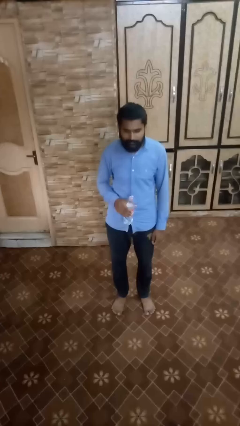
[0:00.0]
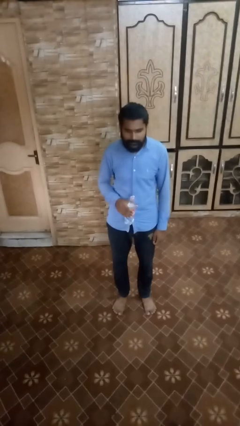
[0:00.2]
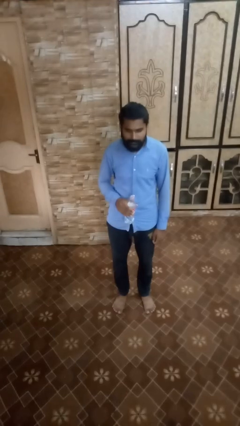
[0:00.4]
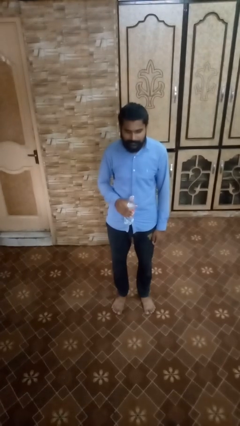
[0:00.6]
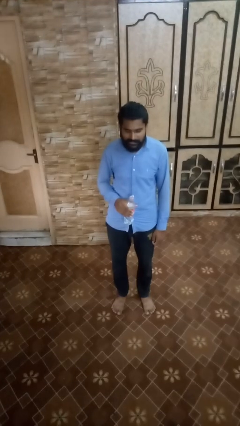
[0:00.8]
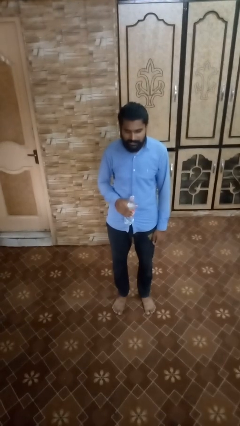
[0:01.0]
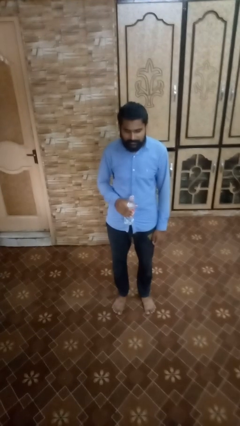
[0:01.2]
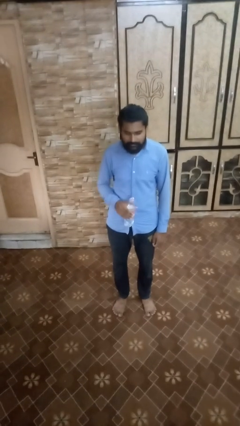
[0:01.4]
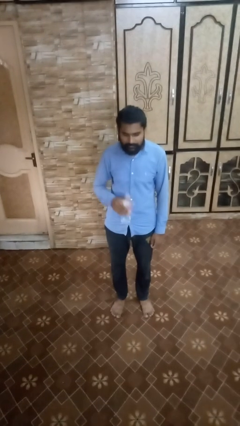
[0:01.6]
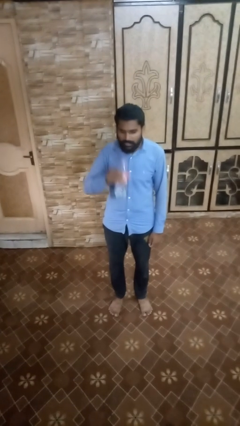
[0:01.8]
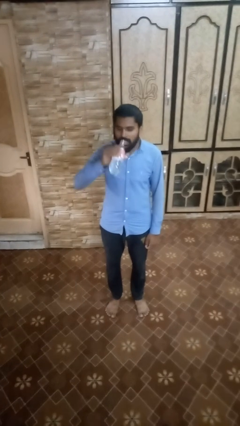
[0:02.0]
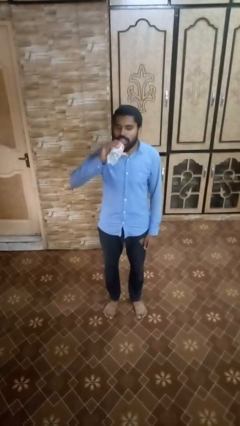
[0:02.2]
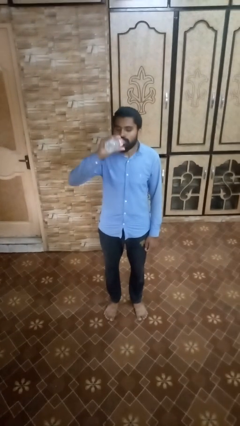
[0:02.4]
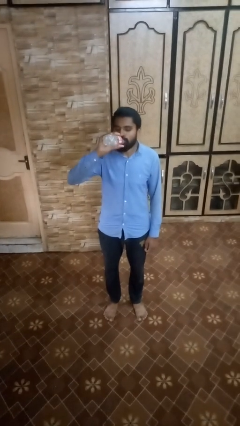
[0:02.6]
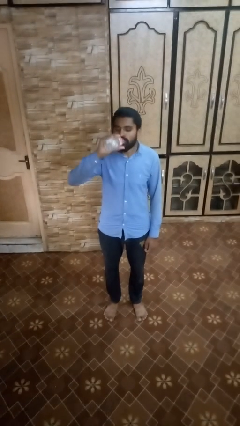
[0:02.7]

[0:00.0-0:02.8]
person drinks from bottle

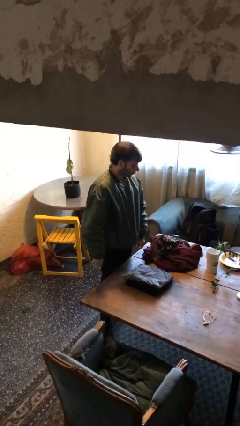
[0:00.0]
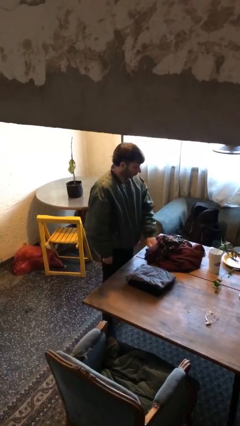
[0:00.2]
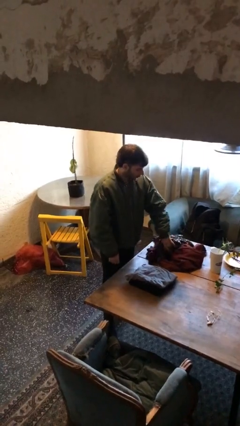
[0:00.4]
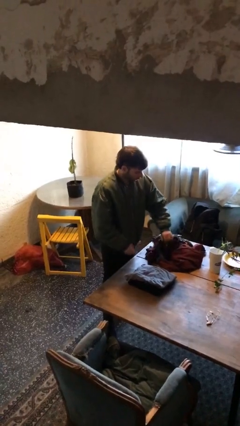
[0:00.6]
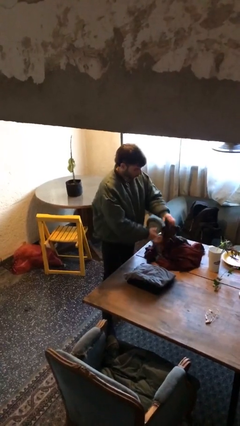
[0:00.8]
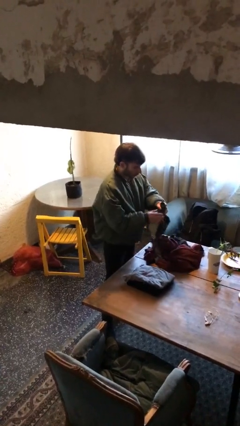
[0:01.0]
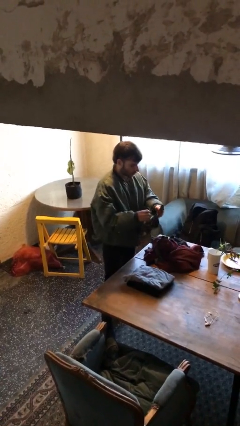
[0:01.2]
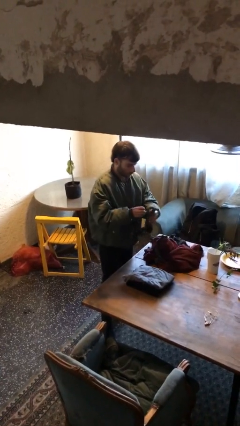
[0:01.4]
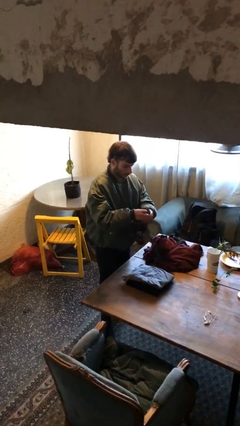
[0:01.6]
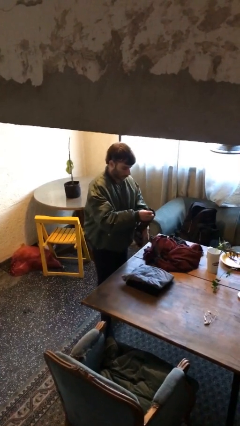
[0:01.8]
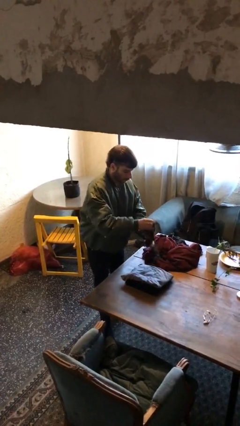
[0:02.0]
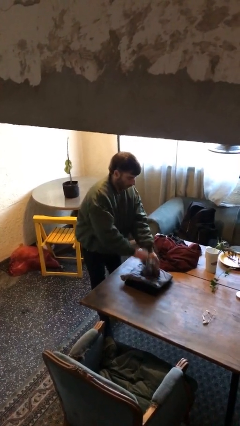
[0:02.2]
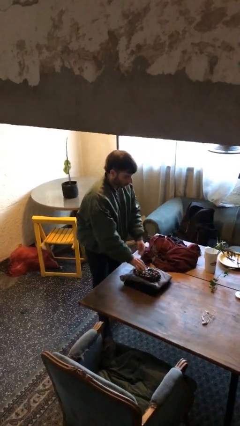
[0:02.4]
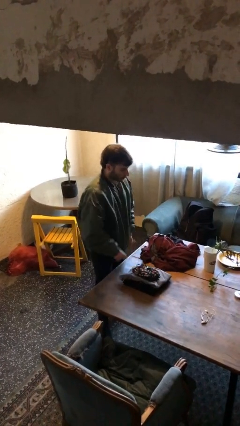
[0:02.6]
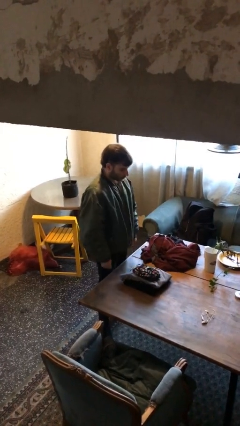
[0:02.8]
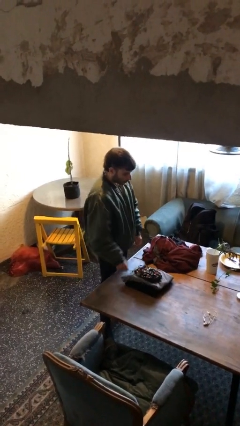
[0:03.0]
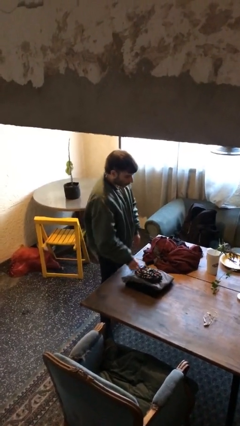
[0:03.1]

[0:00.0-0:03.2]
person folds socks

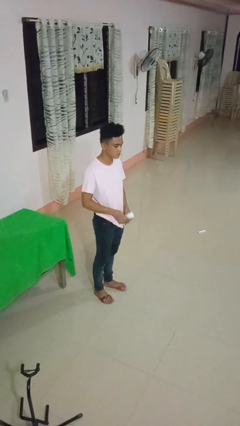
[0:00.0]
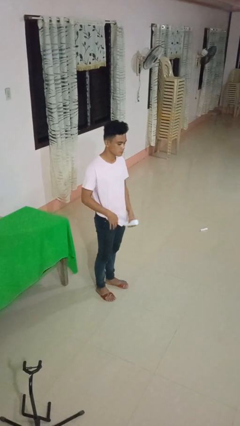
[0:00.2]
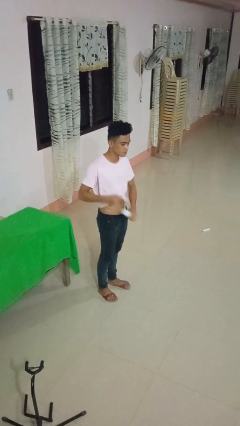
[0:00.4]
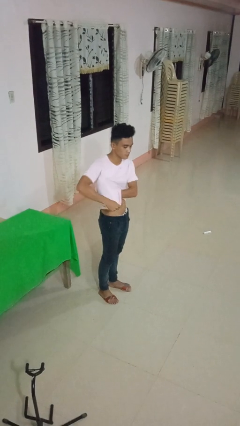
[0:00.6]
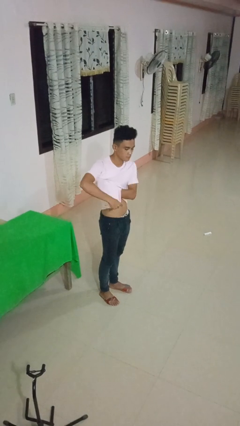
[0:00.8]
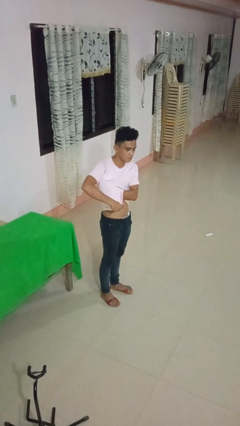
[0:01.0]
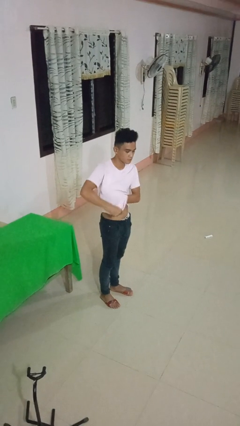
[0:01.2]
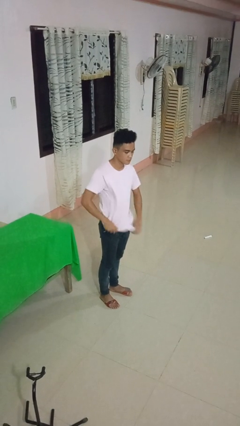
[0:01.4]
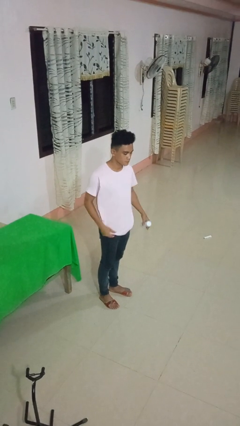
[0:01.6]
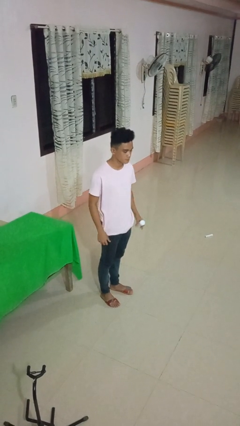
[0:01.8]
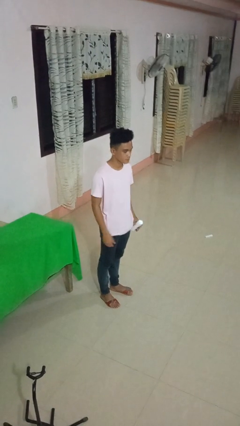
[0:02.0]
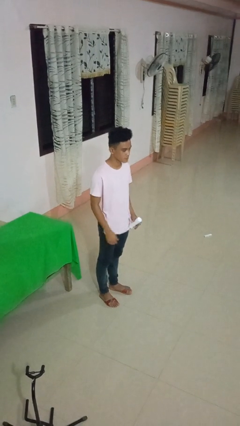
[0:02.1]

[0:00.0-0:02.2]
person applies deodorant

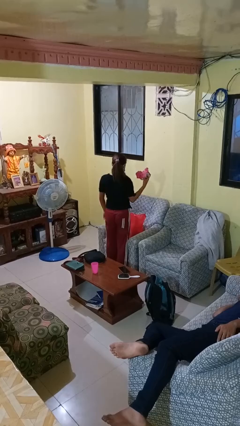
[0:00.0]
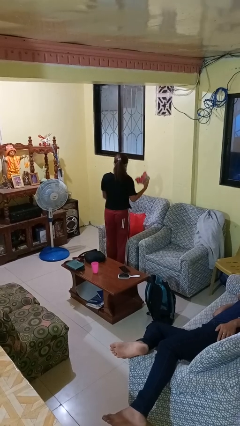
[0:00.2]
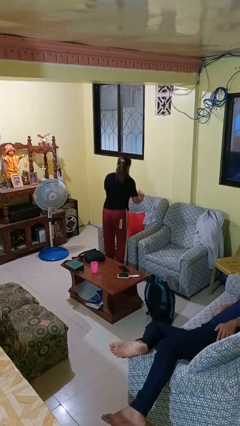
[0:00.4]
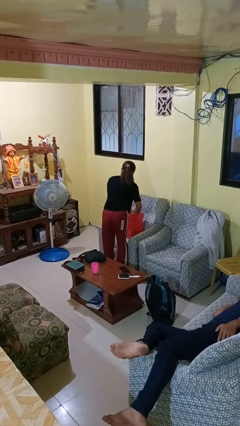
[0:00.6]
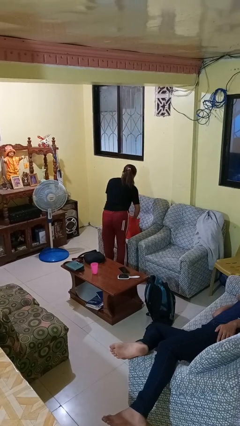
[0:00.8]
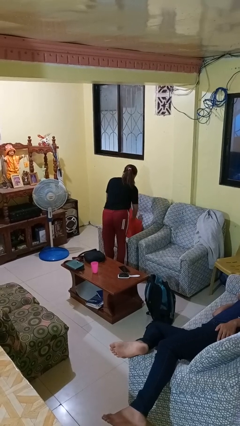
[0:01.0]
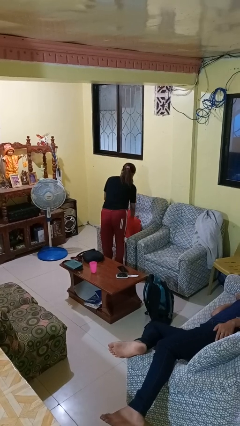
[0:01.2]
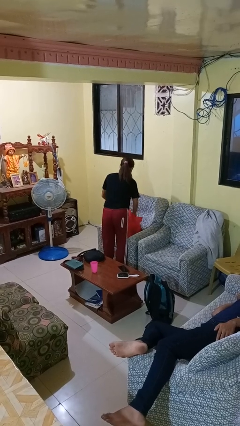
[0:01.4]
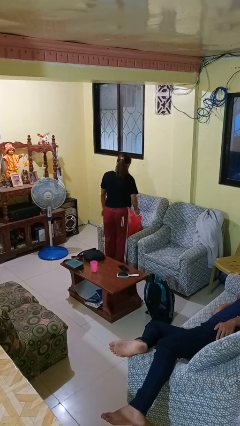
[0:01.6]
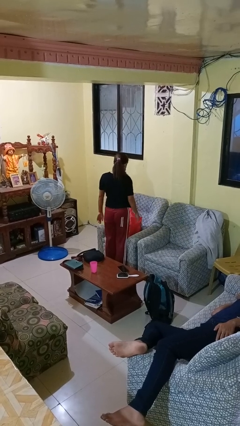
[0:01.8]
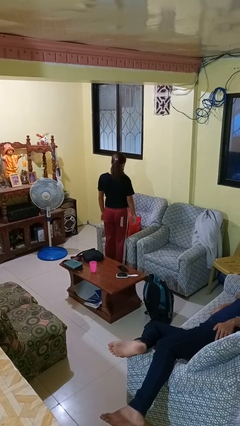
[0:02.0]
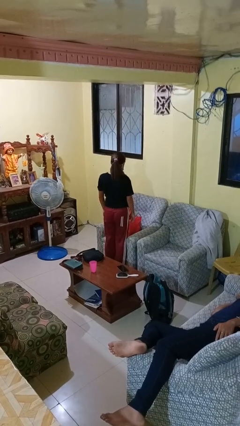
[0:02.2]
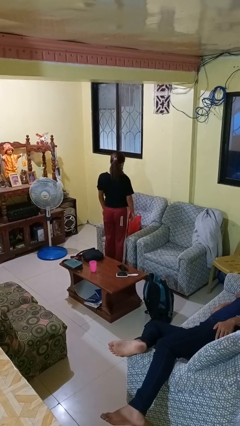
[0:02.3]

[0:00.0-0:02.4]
person puts object into bag

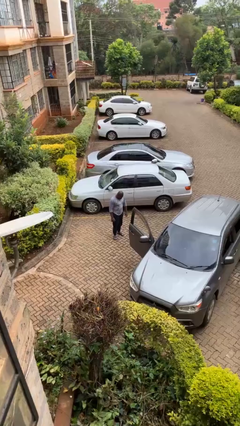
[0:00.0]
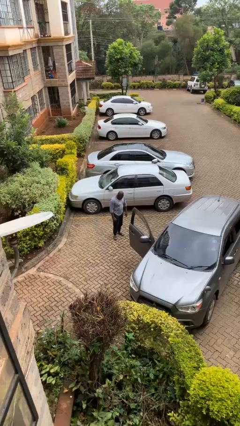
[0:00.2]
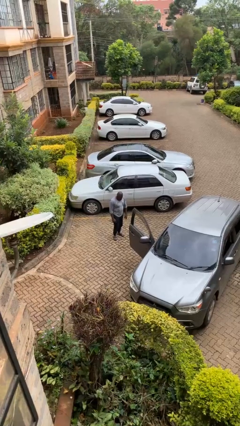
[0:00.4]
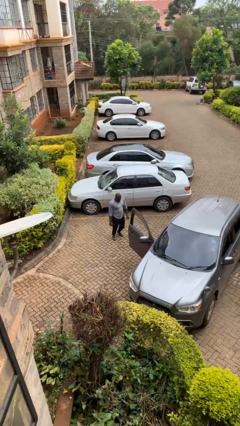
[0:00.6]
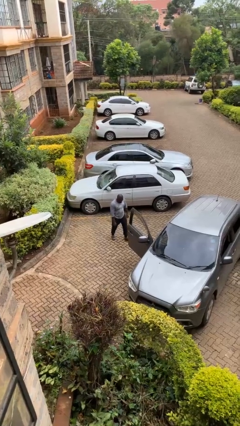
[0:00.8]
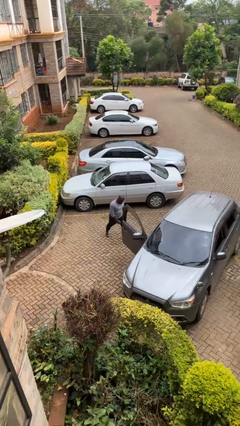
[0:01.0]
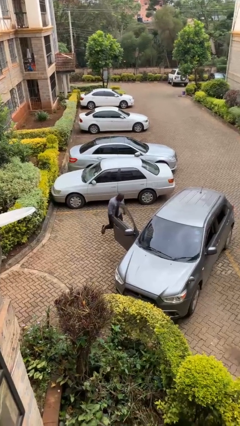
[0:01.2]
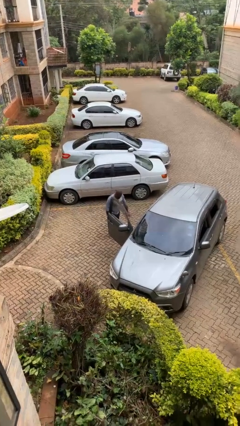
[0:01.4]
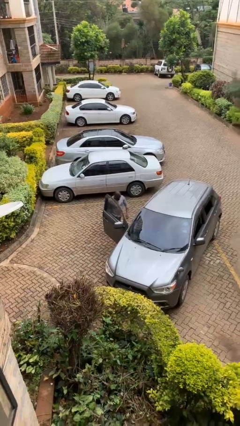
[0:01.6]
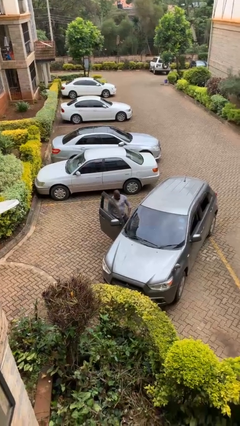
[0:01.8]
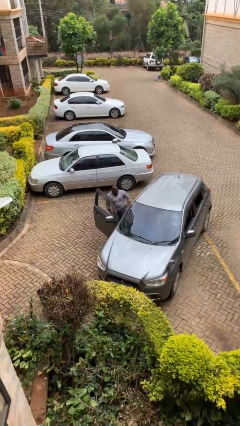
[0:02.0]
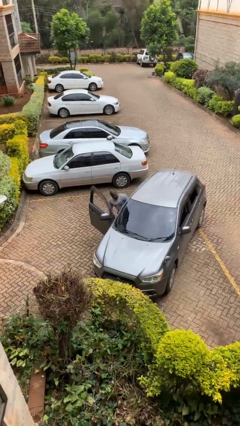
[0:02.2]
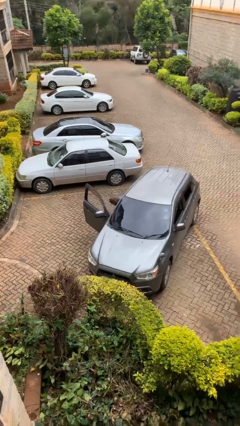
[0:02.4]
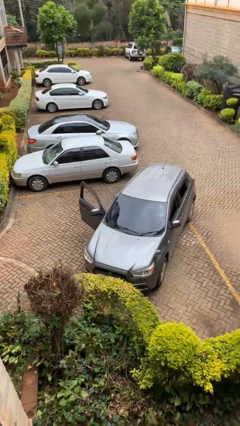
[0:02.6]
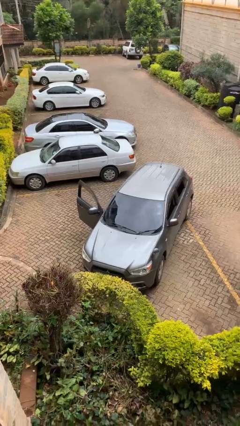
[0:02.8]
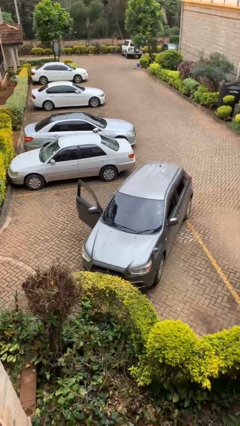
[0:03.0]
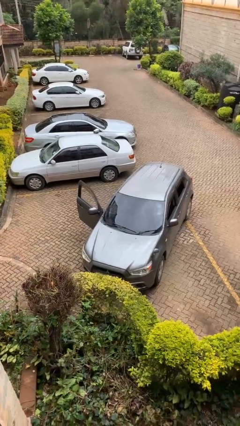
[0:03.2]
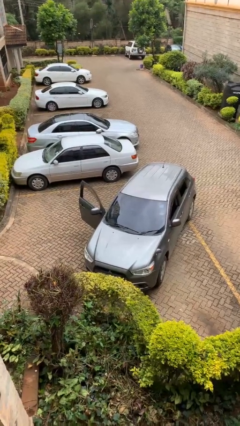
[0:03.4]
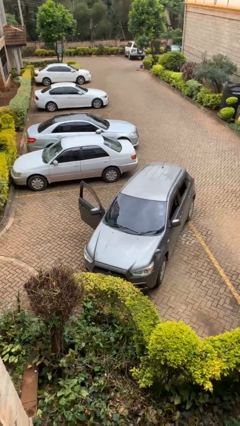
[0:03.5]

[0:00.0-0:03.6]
person enters car

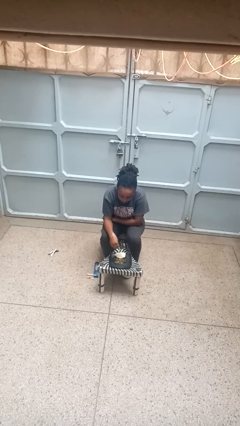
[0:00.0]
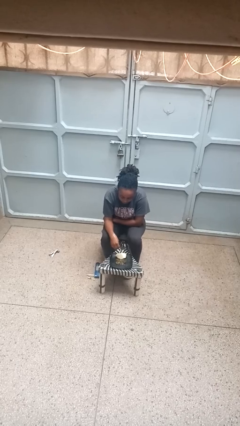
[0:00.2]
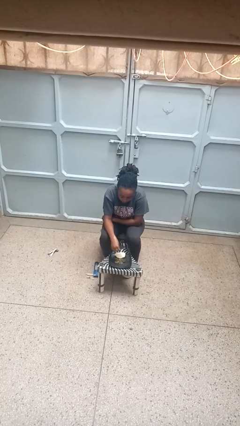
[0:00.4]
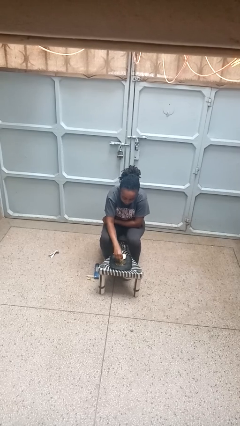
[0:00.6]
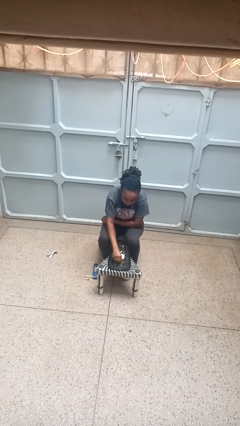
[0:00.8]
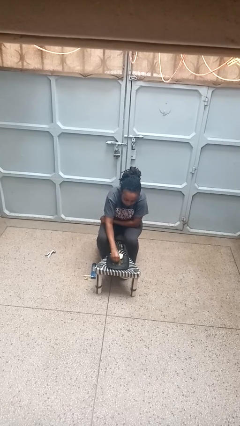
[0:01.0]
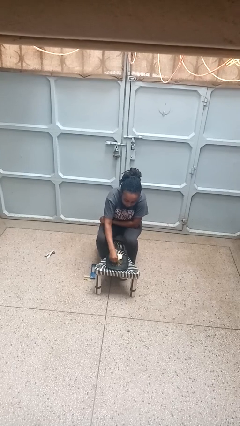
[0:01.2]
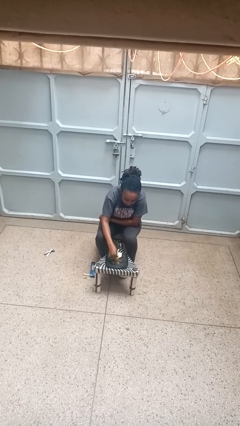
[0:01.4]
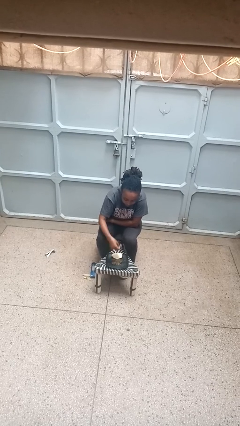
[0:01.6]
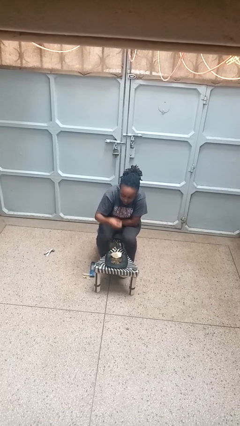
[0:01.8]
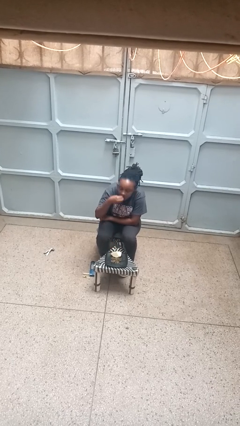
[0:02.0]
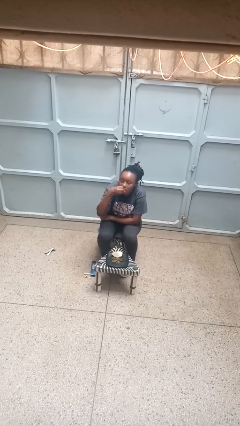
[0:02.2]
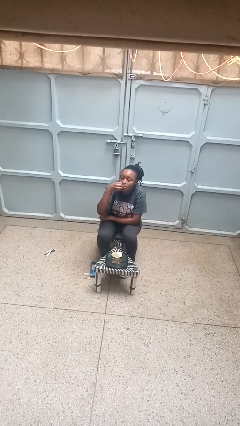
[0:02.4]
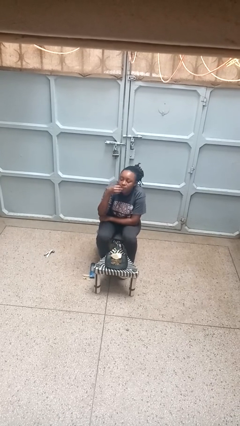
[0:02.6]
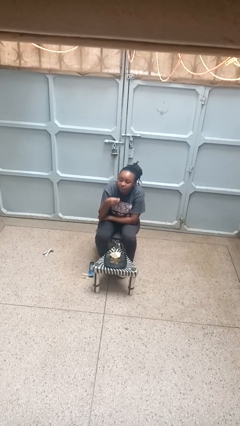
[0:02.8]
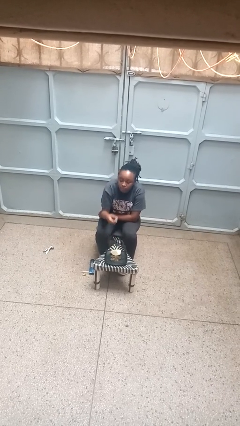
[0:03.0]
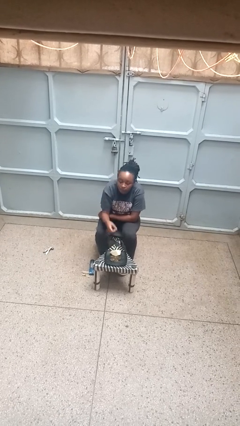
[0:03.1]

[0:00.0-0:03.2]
person eats with hands
